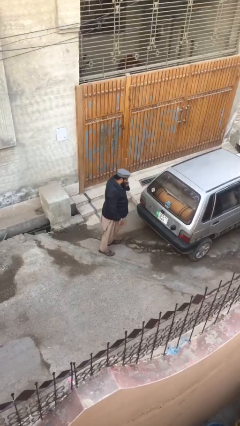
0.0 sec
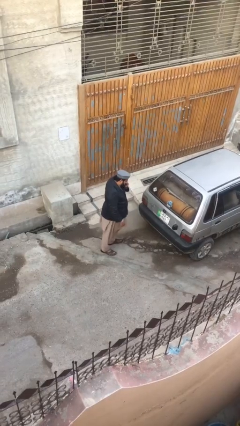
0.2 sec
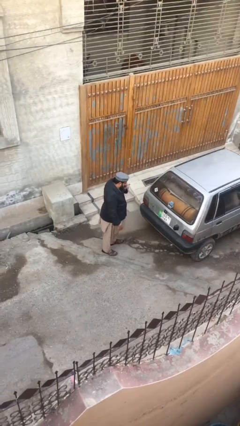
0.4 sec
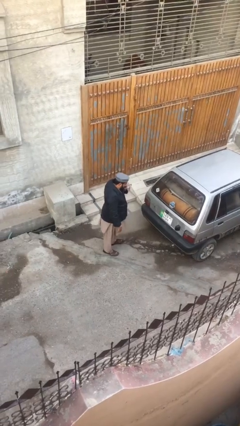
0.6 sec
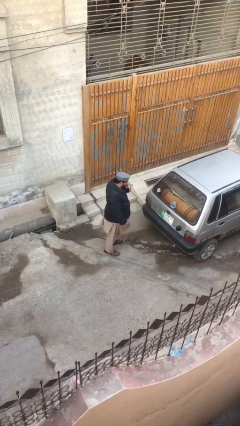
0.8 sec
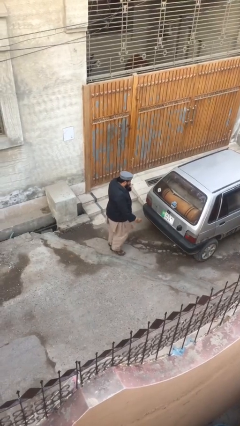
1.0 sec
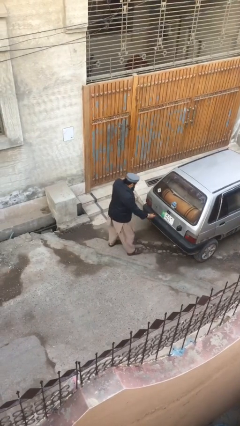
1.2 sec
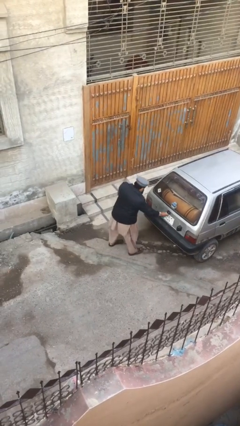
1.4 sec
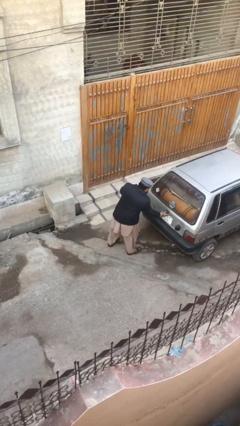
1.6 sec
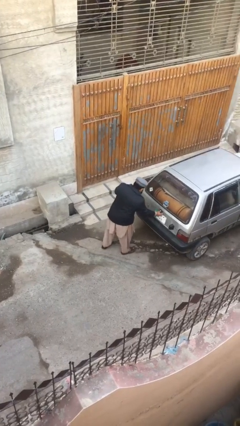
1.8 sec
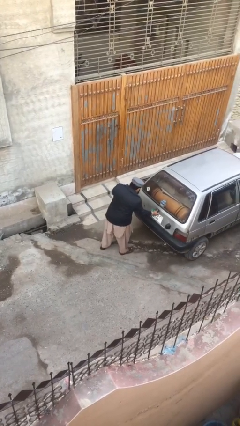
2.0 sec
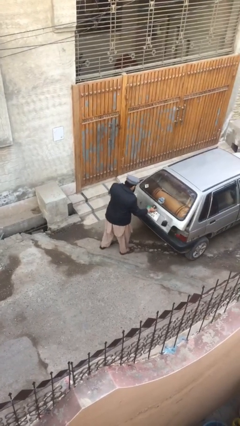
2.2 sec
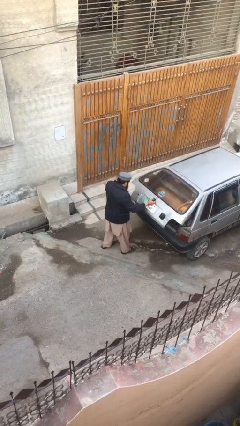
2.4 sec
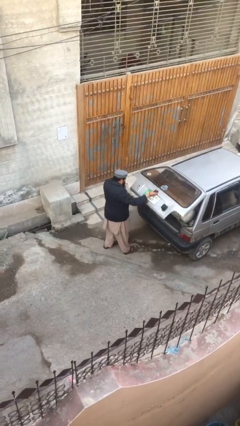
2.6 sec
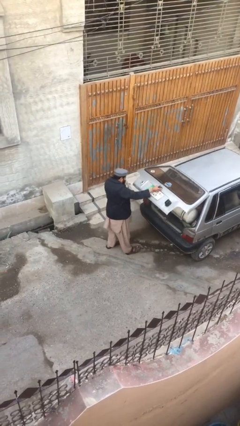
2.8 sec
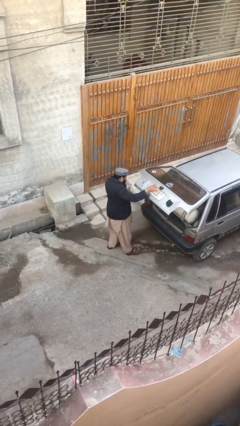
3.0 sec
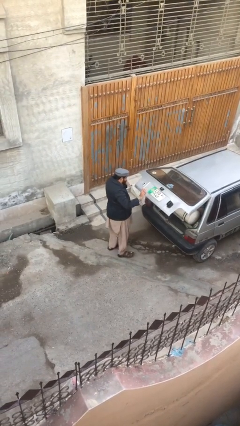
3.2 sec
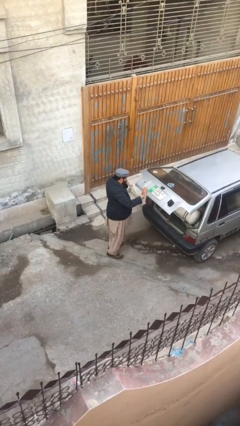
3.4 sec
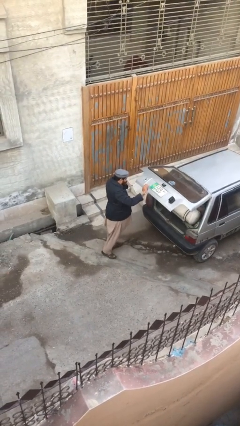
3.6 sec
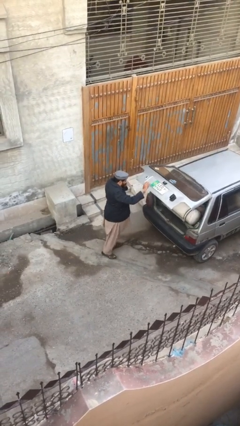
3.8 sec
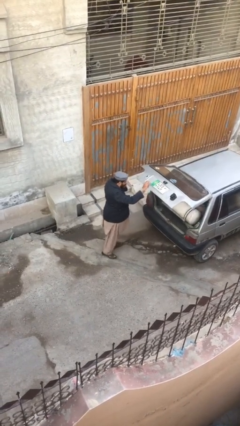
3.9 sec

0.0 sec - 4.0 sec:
person opens car trunk

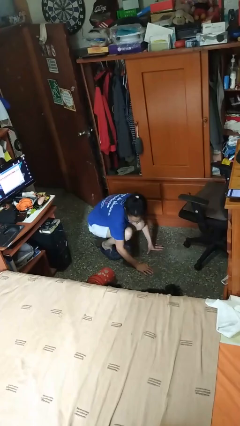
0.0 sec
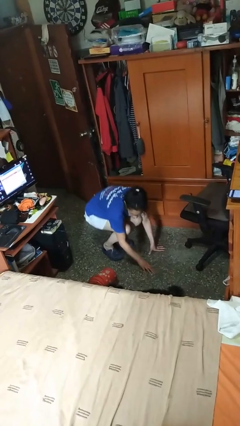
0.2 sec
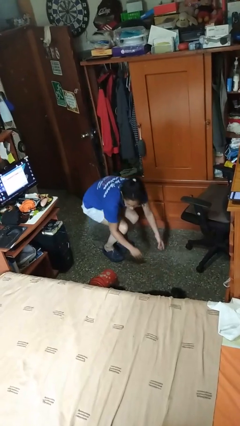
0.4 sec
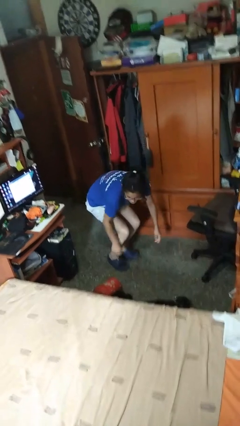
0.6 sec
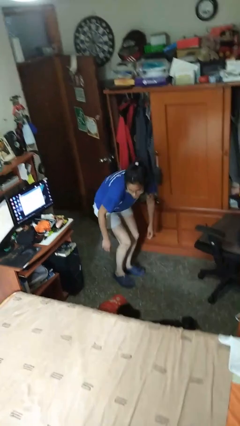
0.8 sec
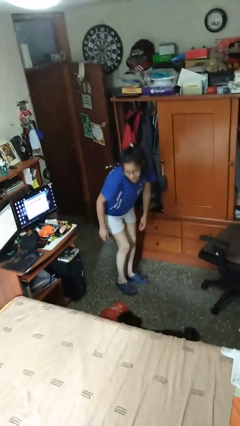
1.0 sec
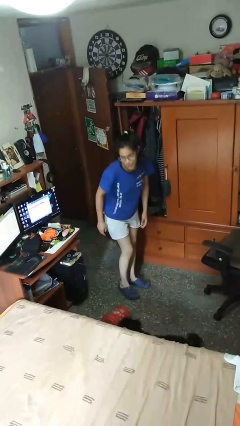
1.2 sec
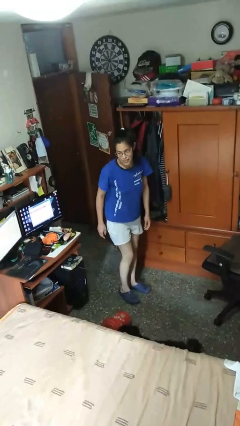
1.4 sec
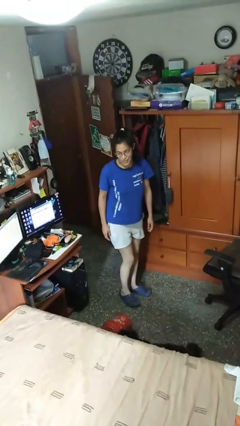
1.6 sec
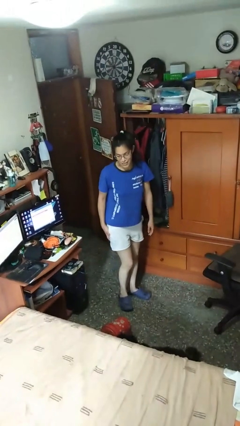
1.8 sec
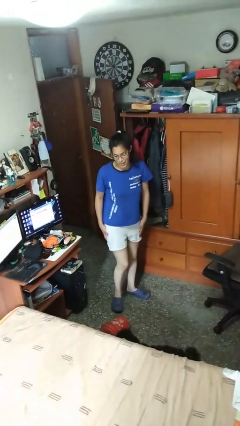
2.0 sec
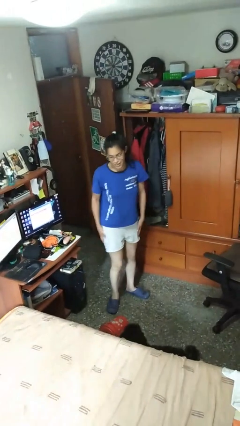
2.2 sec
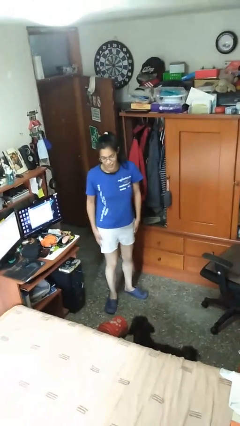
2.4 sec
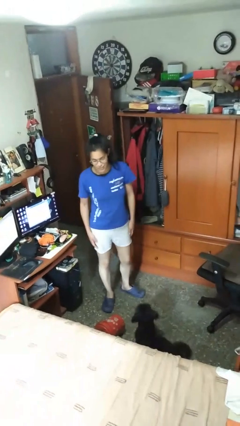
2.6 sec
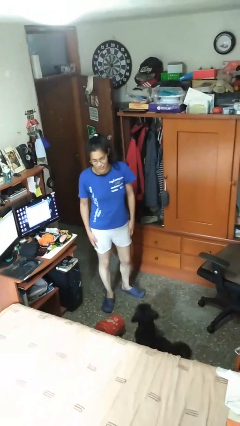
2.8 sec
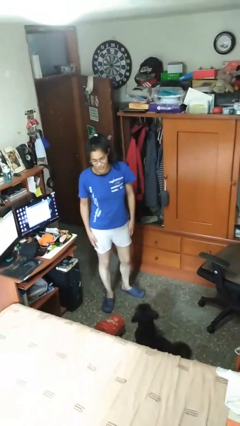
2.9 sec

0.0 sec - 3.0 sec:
person stands up from floor

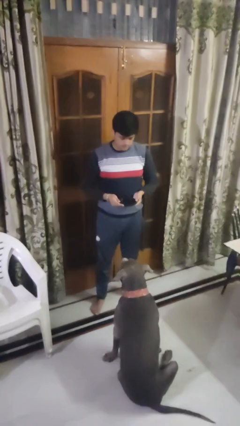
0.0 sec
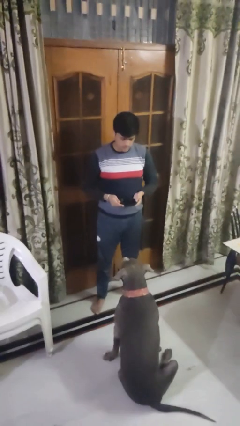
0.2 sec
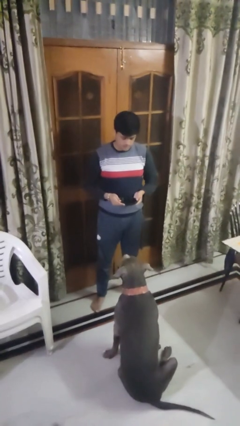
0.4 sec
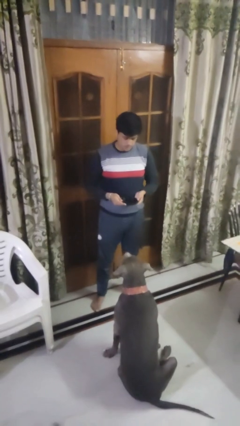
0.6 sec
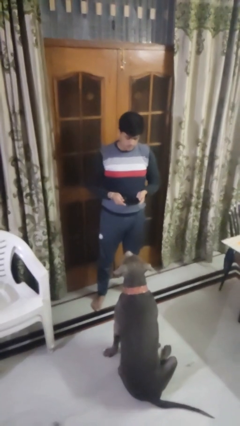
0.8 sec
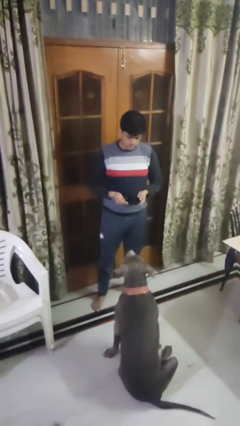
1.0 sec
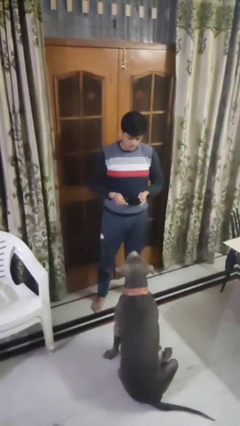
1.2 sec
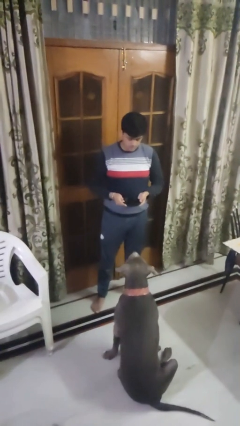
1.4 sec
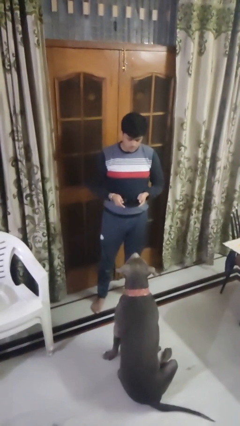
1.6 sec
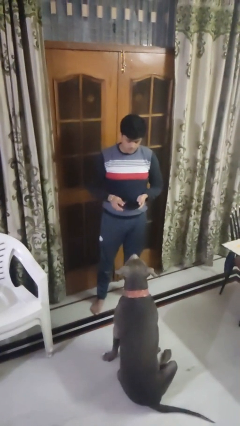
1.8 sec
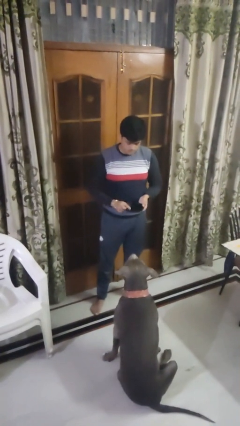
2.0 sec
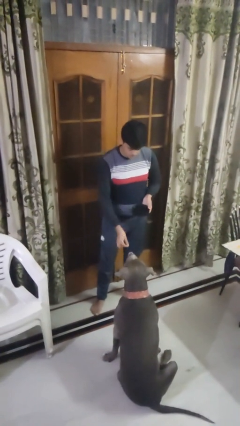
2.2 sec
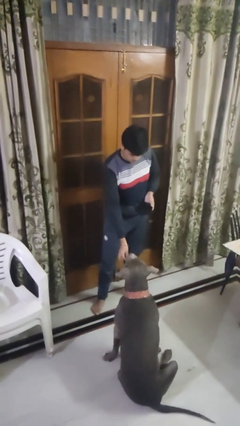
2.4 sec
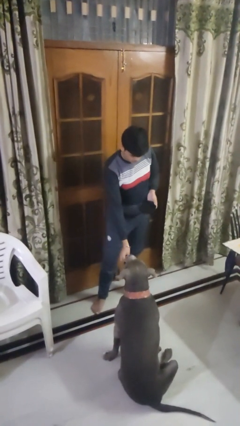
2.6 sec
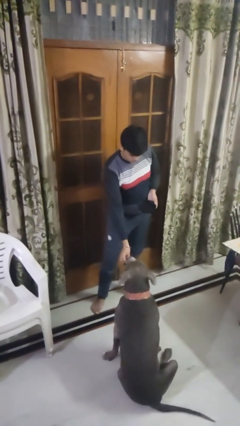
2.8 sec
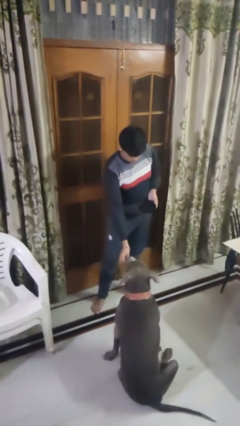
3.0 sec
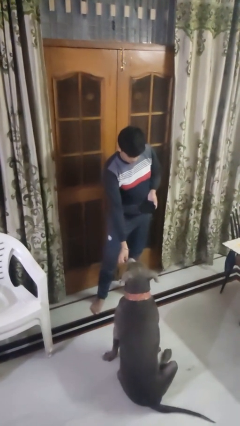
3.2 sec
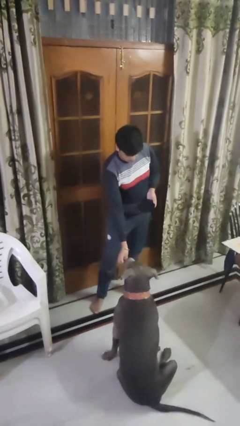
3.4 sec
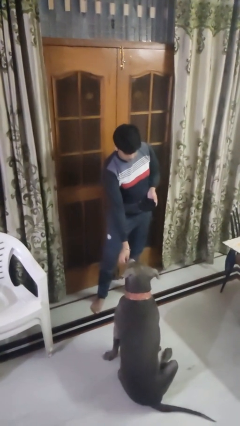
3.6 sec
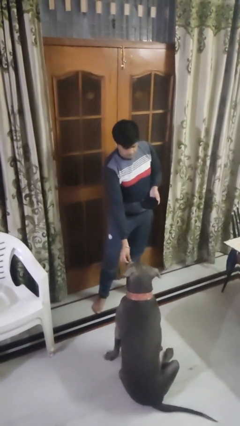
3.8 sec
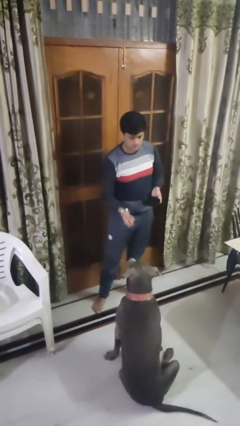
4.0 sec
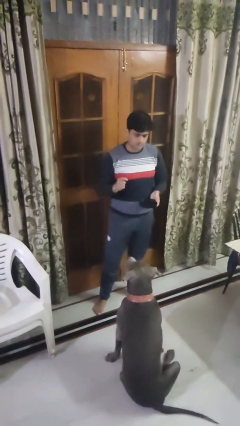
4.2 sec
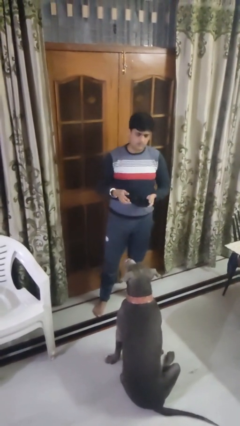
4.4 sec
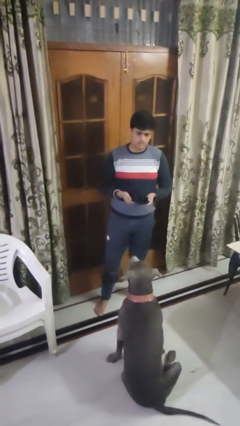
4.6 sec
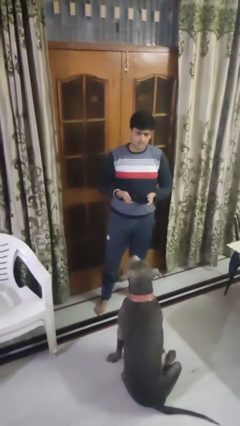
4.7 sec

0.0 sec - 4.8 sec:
person feeds dog

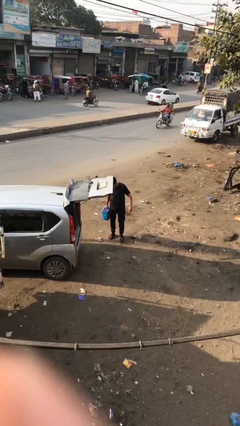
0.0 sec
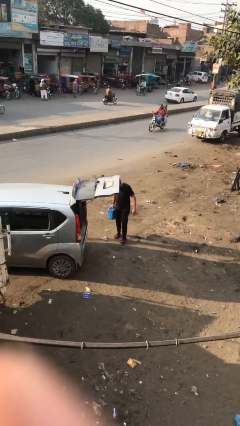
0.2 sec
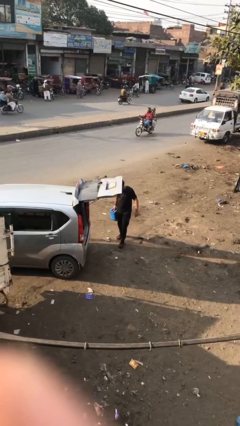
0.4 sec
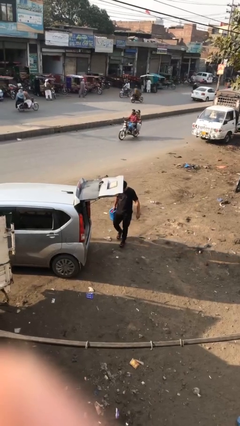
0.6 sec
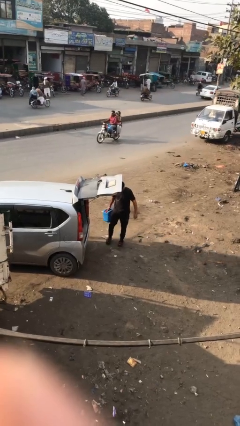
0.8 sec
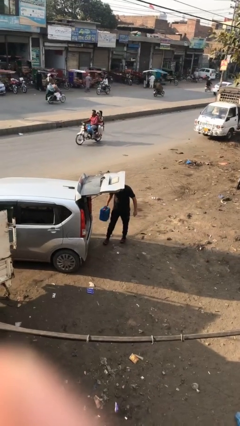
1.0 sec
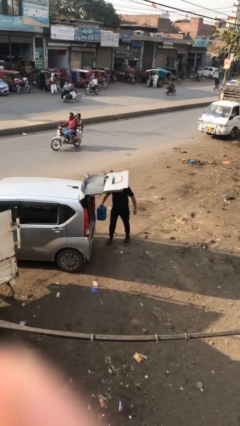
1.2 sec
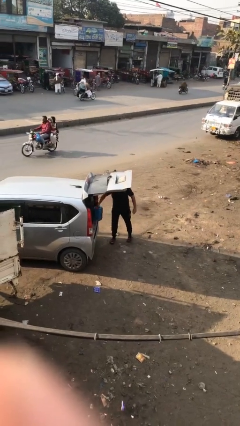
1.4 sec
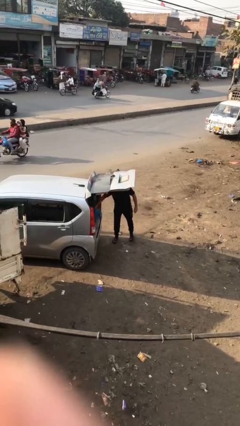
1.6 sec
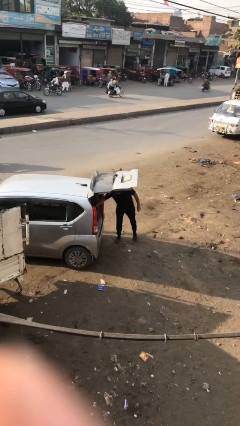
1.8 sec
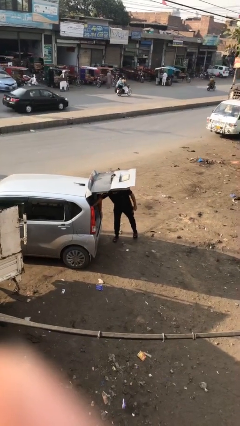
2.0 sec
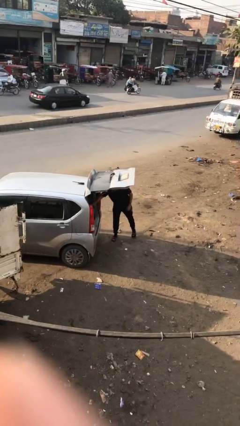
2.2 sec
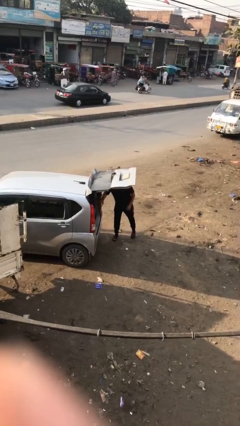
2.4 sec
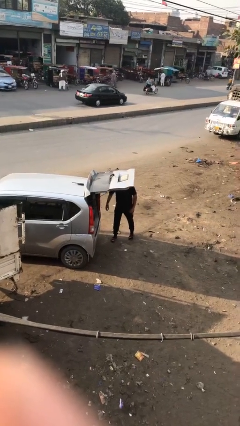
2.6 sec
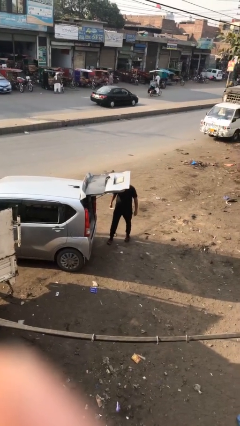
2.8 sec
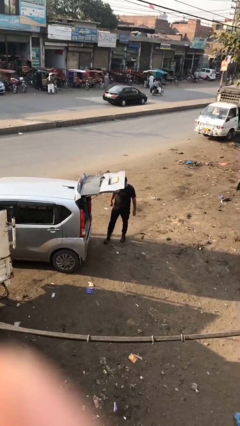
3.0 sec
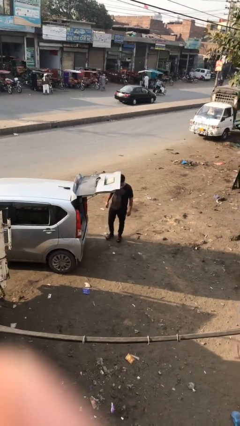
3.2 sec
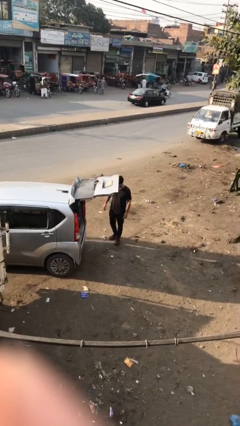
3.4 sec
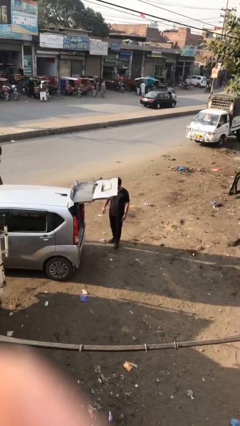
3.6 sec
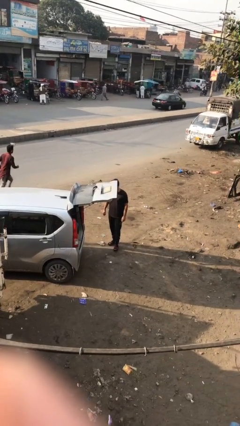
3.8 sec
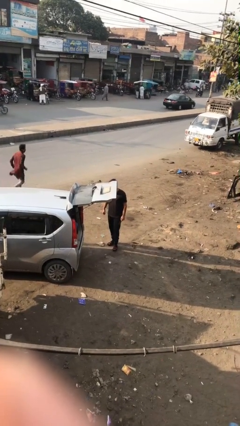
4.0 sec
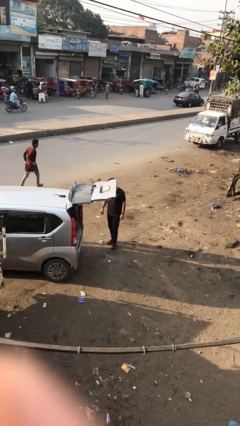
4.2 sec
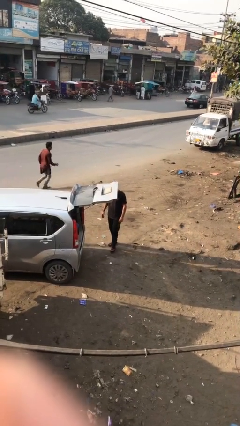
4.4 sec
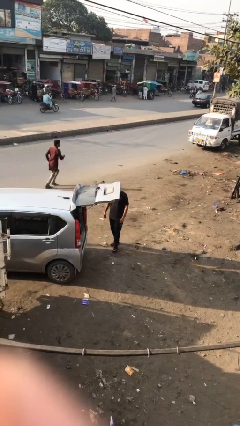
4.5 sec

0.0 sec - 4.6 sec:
person loads car

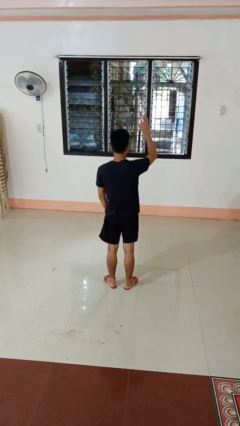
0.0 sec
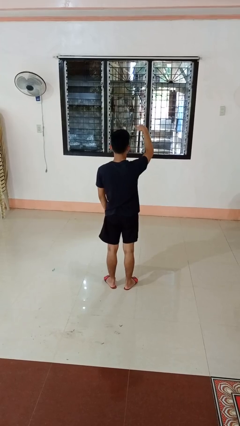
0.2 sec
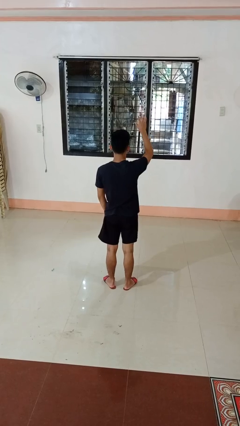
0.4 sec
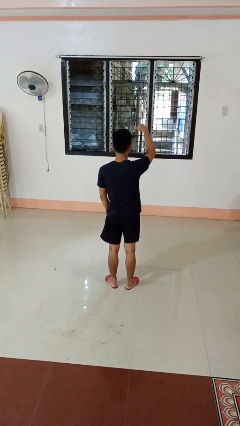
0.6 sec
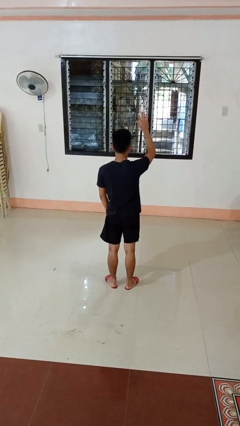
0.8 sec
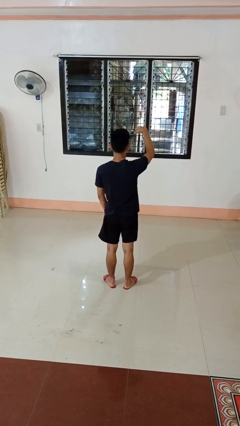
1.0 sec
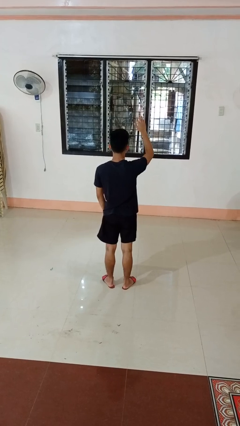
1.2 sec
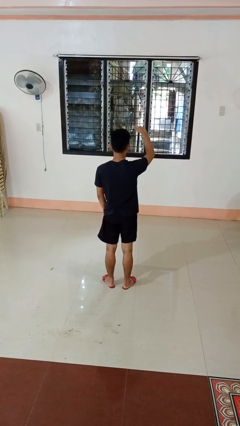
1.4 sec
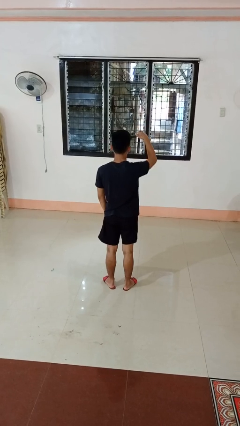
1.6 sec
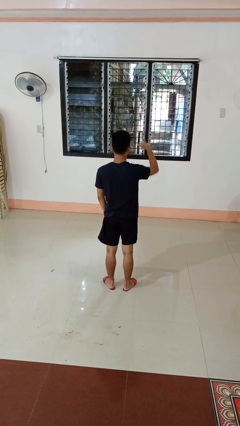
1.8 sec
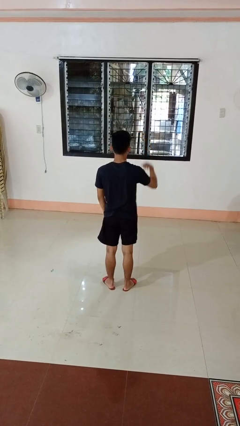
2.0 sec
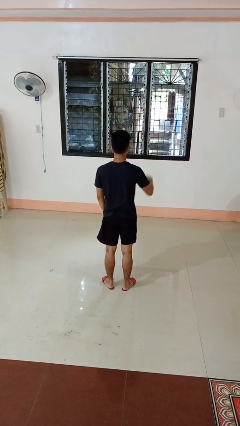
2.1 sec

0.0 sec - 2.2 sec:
person gestures come here
